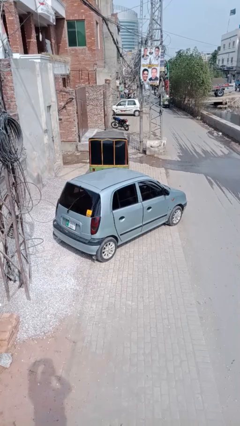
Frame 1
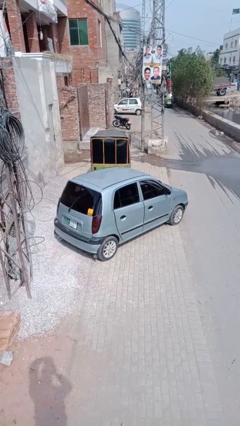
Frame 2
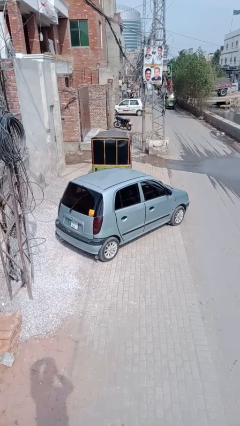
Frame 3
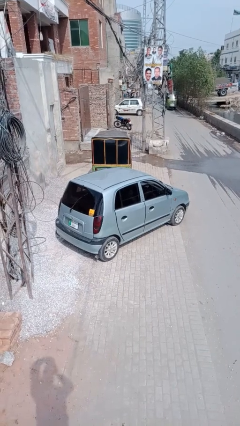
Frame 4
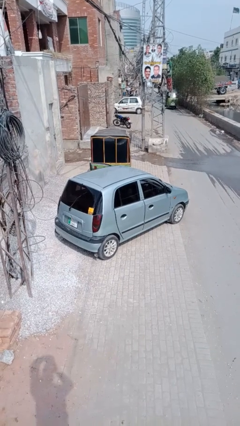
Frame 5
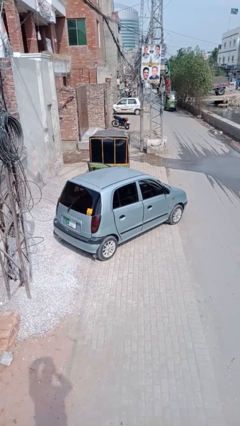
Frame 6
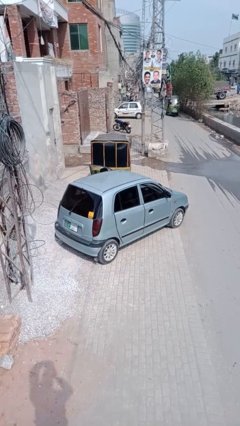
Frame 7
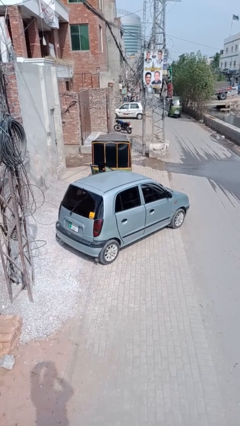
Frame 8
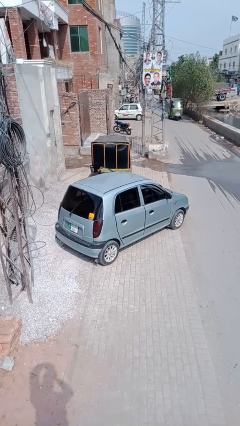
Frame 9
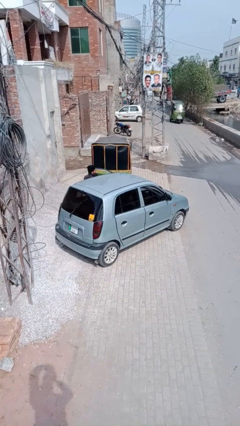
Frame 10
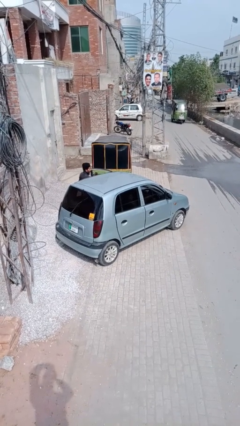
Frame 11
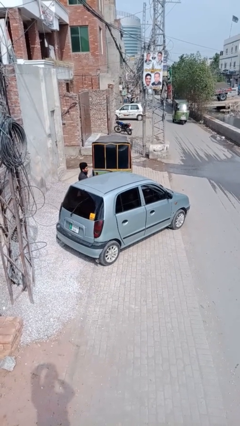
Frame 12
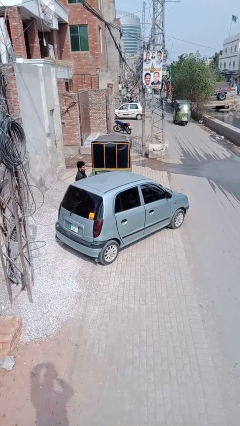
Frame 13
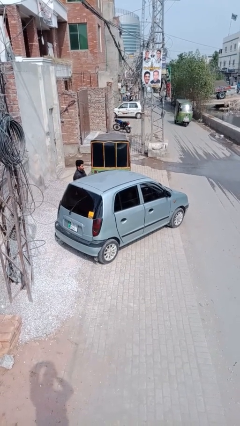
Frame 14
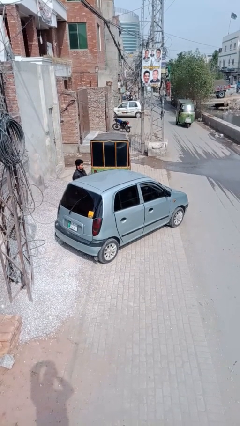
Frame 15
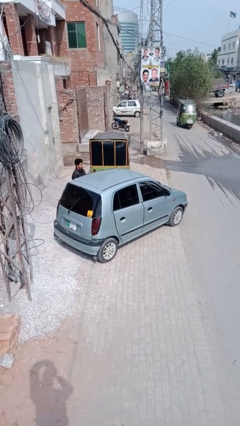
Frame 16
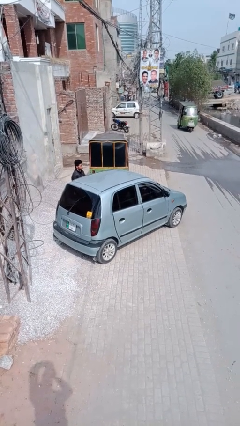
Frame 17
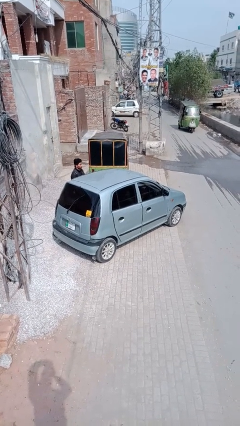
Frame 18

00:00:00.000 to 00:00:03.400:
car drops off person

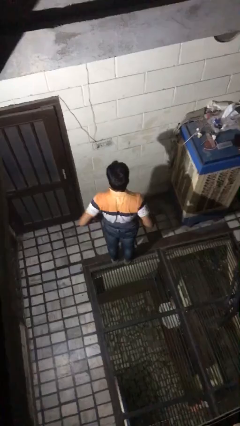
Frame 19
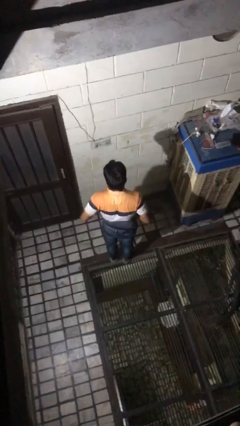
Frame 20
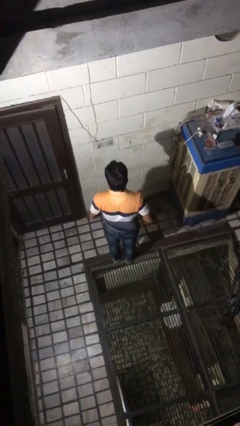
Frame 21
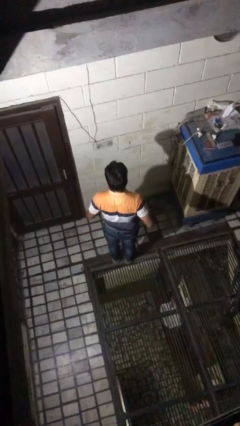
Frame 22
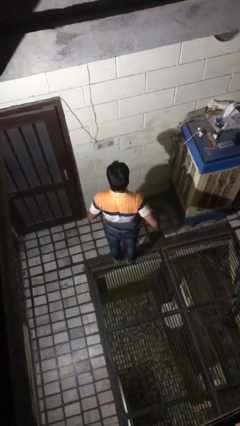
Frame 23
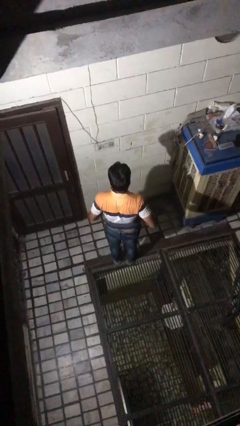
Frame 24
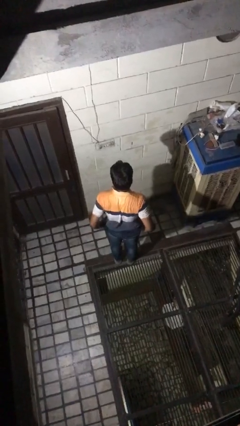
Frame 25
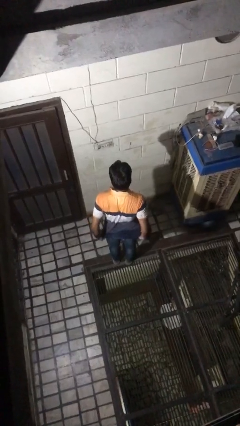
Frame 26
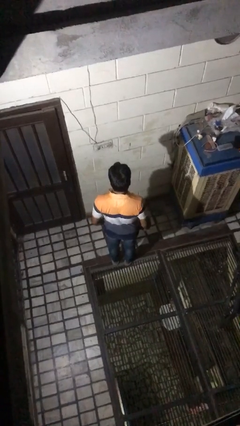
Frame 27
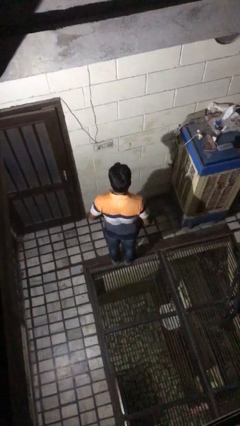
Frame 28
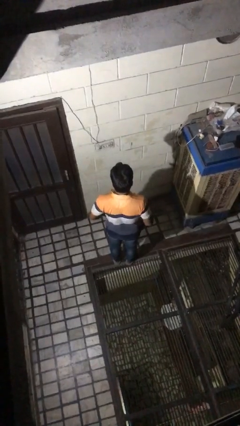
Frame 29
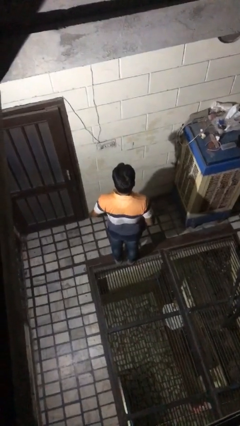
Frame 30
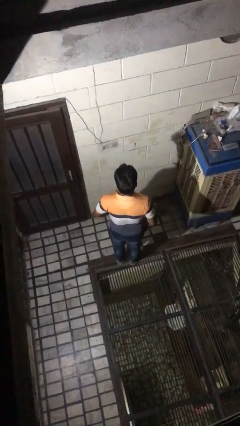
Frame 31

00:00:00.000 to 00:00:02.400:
person untucks shirt

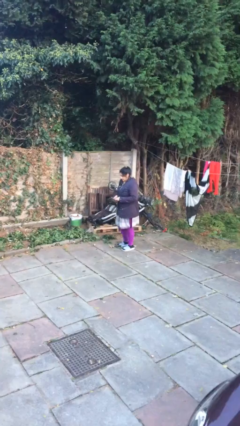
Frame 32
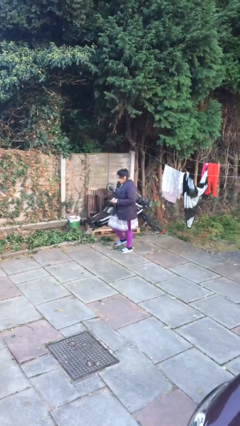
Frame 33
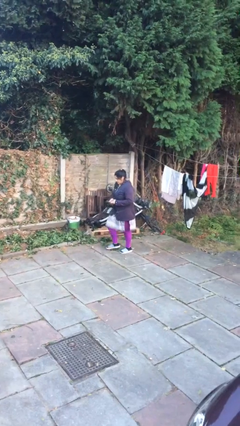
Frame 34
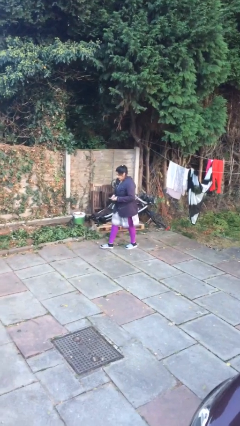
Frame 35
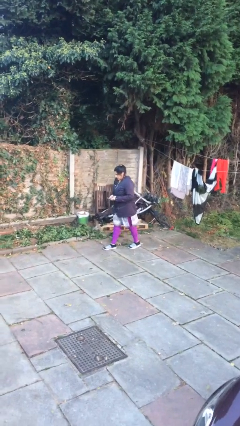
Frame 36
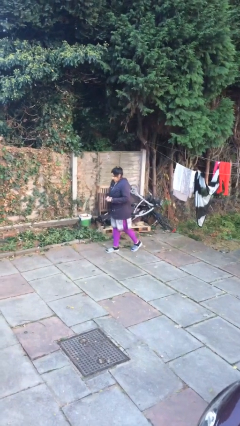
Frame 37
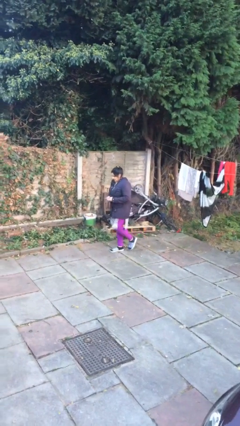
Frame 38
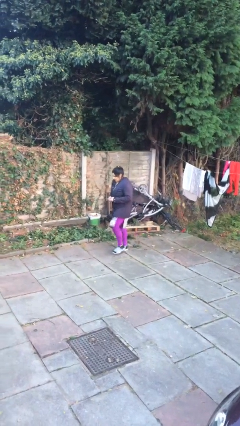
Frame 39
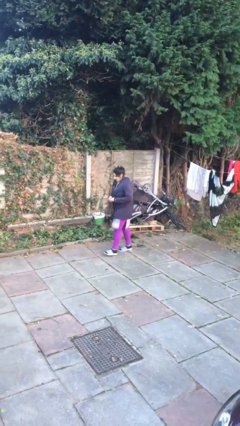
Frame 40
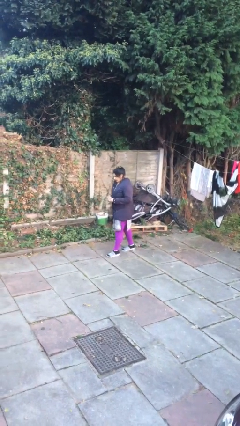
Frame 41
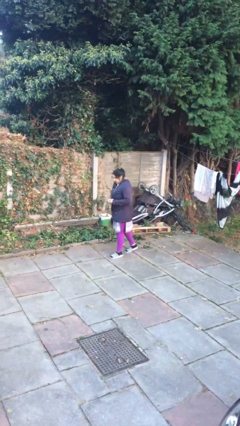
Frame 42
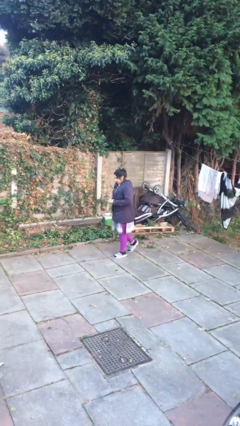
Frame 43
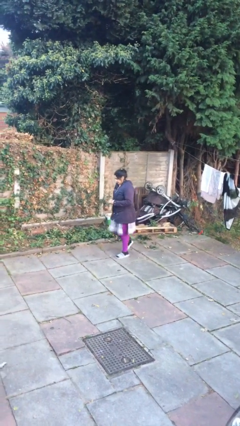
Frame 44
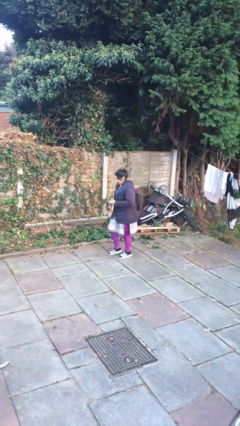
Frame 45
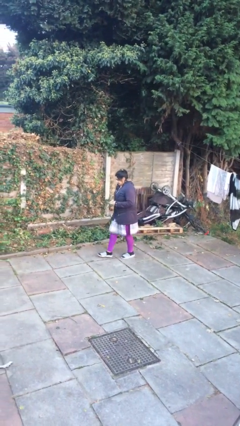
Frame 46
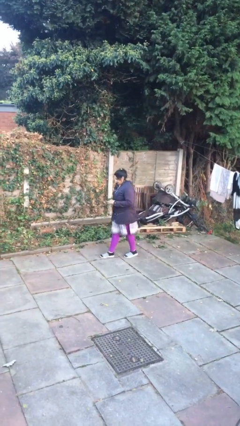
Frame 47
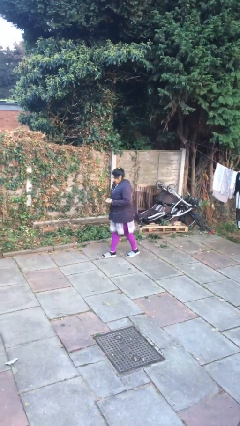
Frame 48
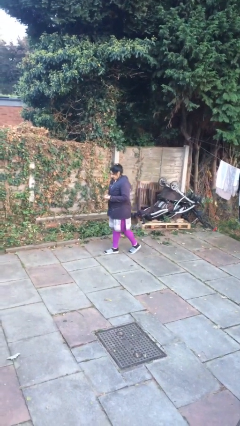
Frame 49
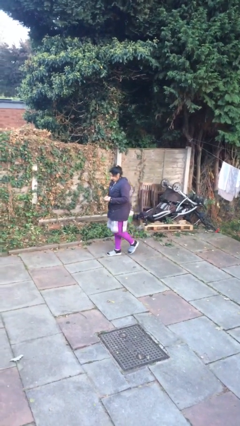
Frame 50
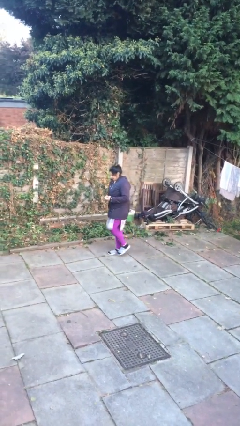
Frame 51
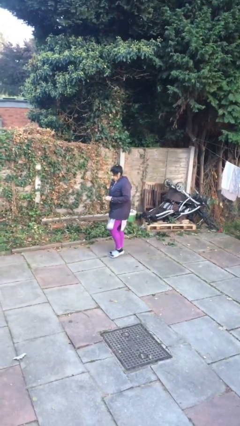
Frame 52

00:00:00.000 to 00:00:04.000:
person texts on phone

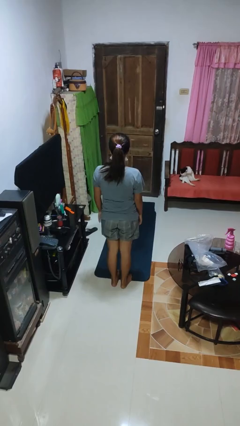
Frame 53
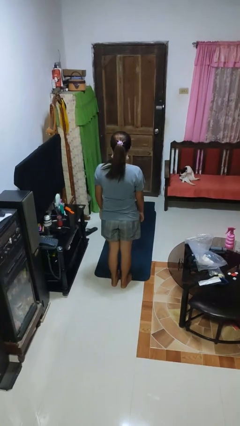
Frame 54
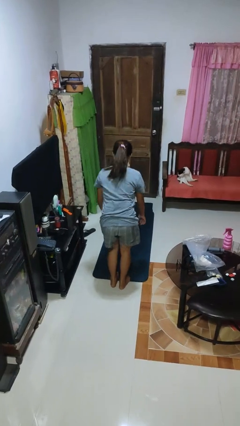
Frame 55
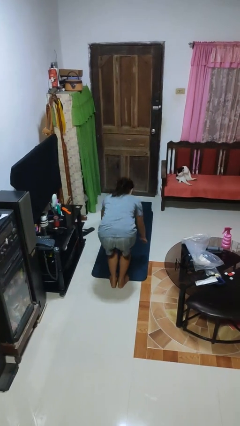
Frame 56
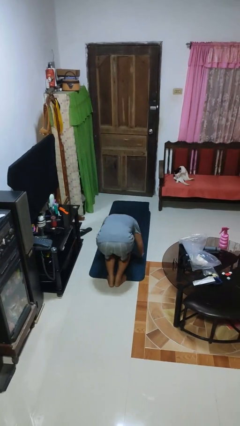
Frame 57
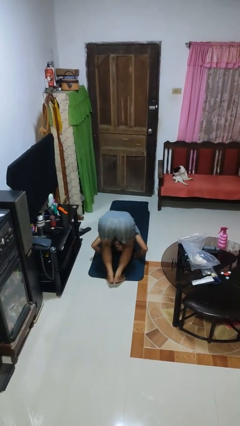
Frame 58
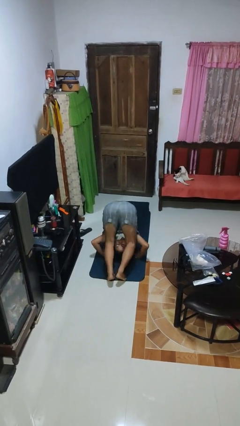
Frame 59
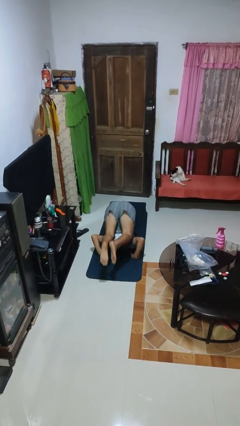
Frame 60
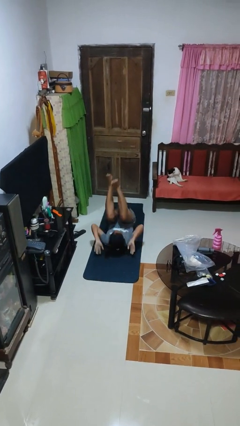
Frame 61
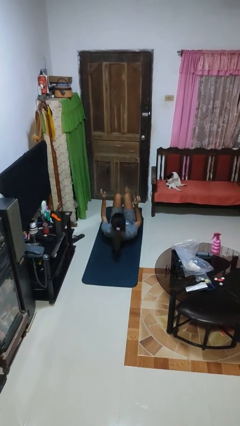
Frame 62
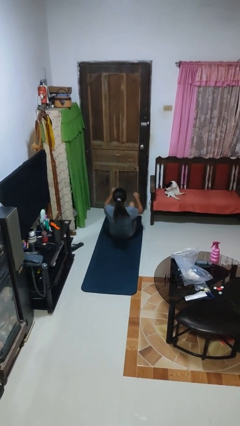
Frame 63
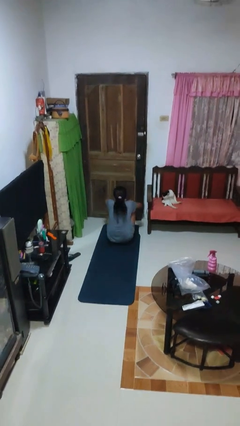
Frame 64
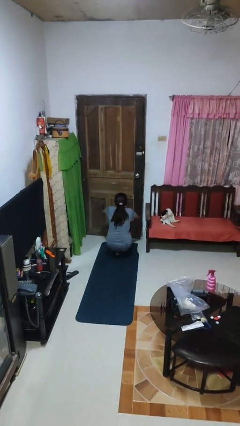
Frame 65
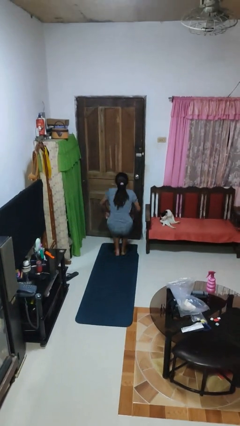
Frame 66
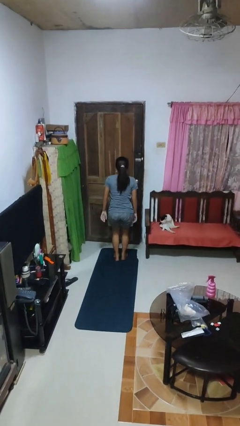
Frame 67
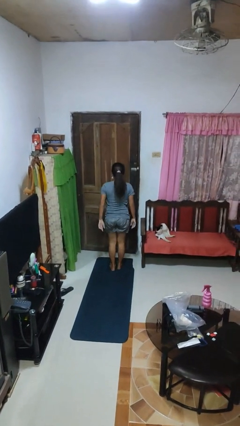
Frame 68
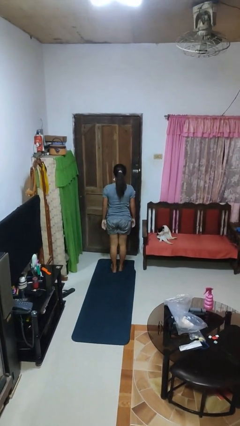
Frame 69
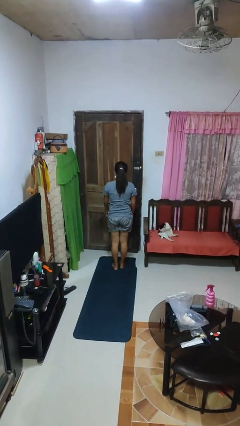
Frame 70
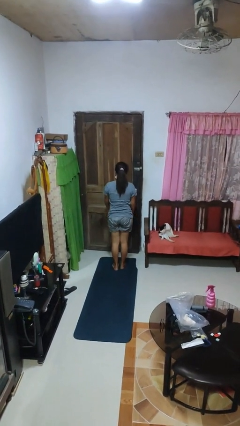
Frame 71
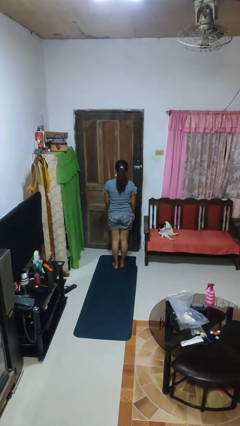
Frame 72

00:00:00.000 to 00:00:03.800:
person somersaults

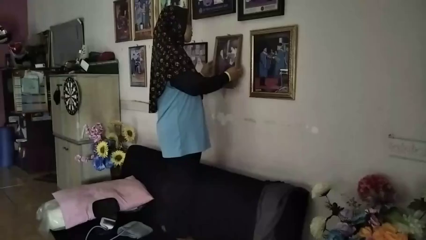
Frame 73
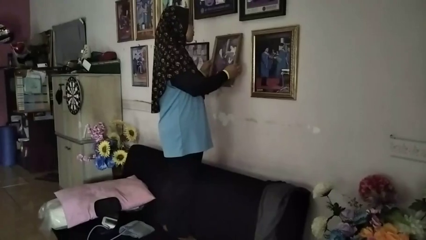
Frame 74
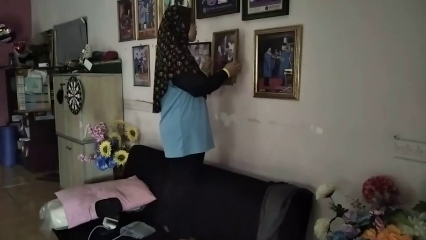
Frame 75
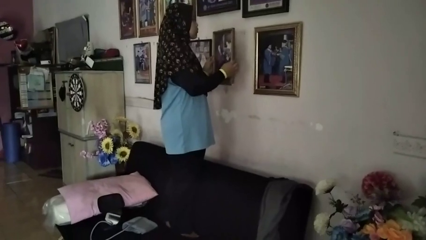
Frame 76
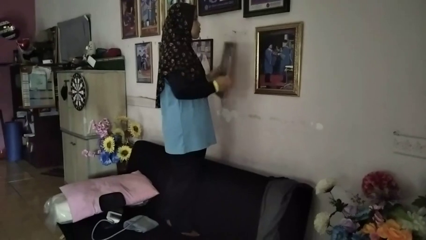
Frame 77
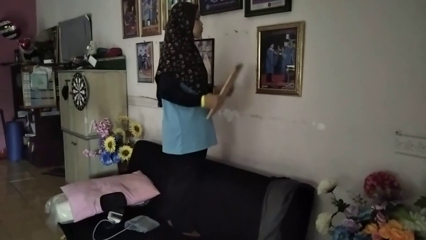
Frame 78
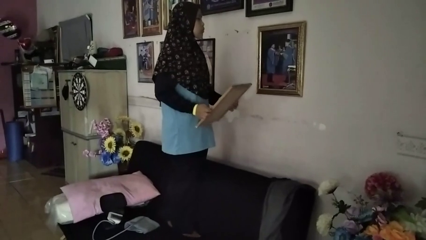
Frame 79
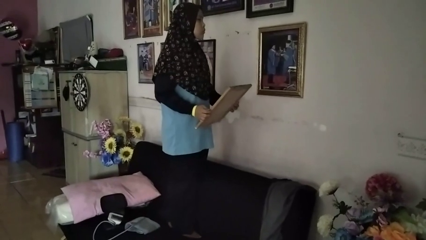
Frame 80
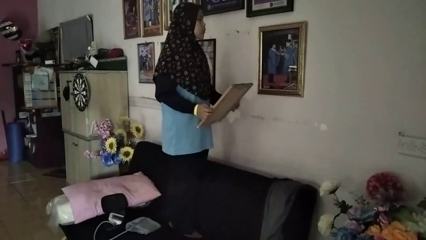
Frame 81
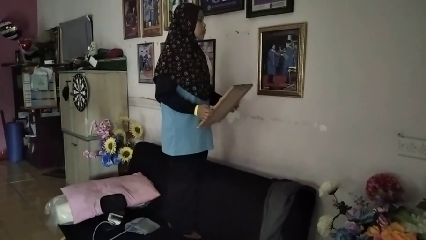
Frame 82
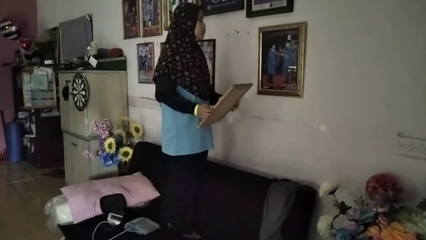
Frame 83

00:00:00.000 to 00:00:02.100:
person takes down picture frame

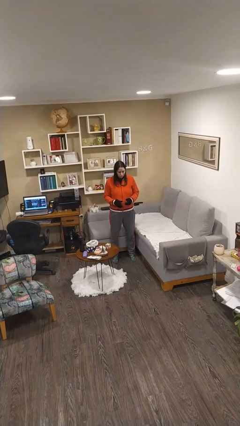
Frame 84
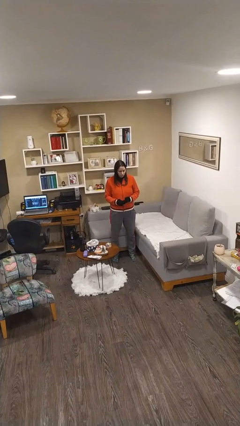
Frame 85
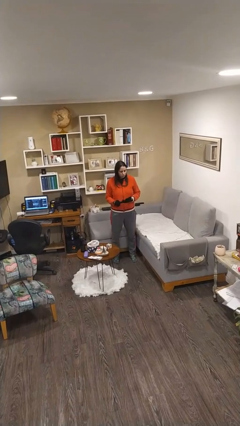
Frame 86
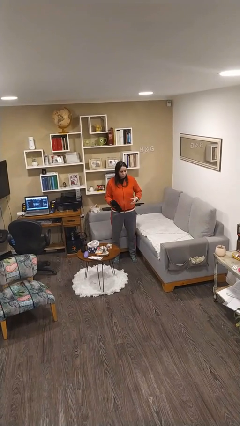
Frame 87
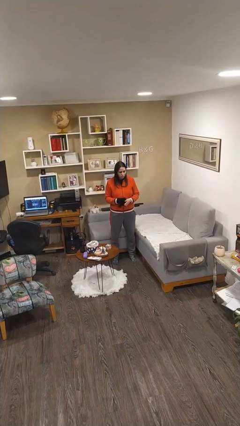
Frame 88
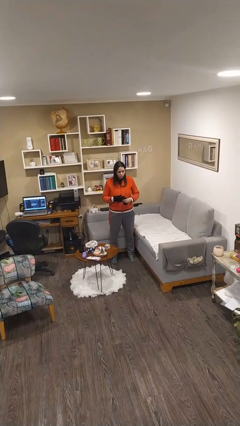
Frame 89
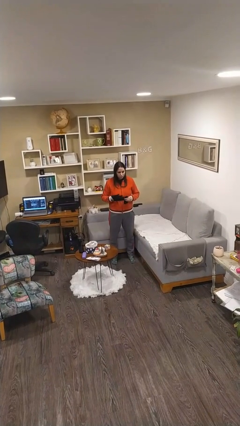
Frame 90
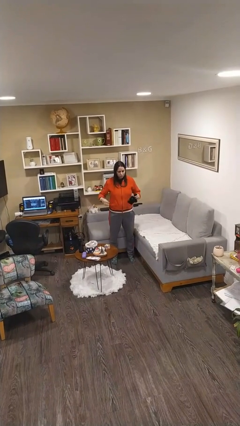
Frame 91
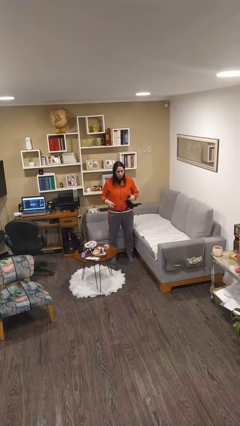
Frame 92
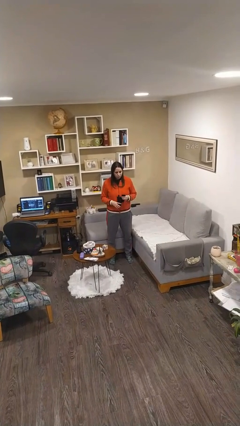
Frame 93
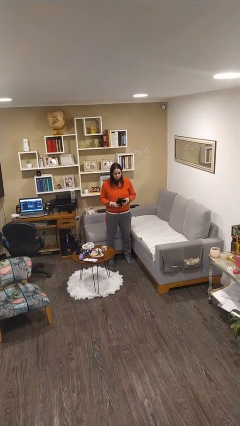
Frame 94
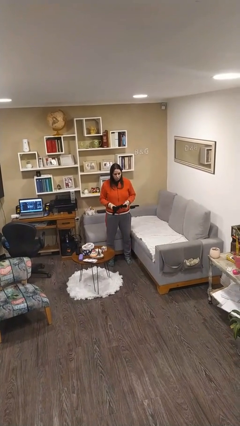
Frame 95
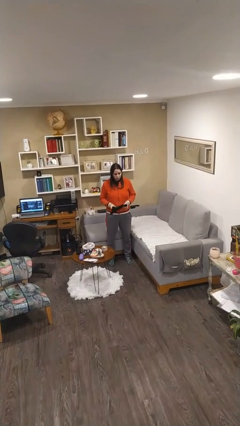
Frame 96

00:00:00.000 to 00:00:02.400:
person takes off gloves
